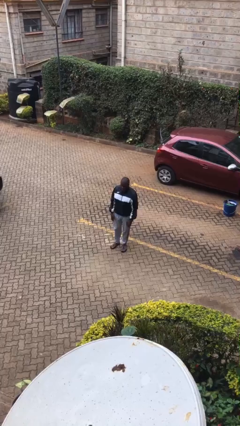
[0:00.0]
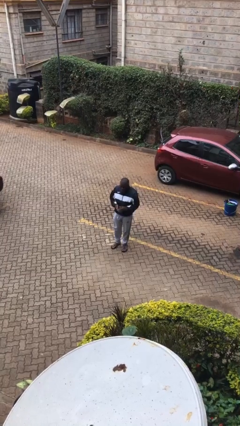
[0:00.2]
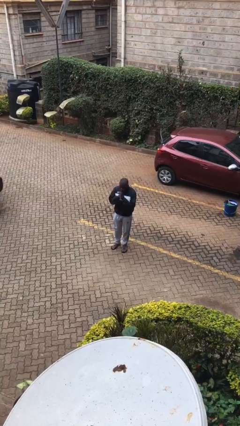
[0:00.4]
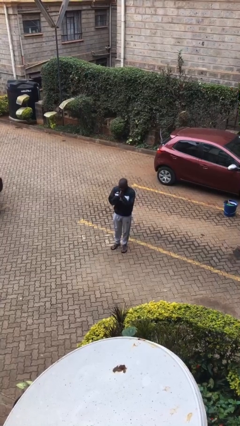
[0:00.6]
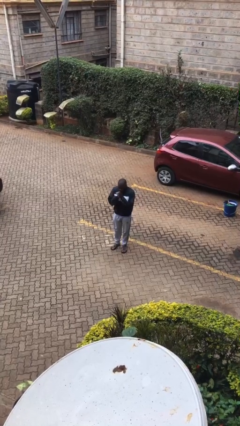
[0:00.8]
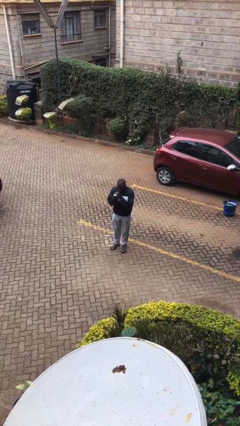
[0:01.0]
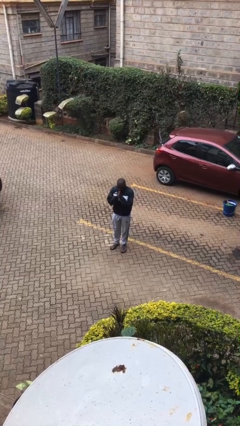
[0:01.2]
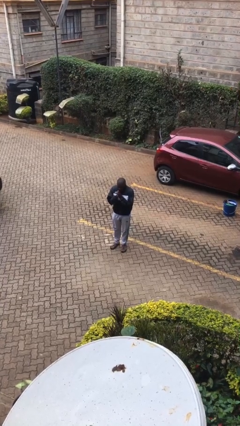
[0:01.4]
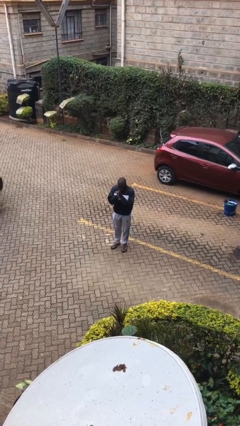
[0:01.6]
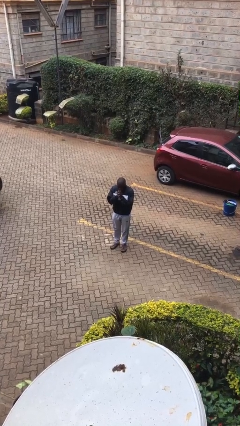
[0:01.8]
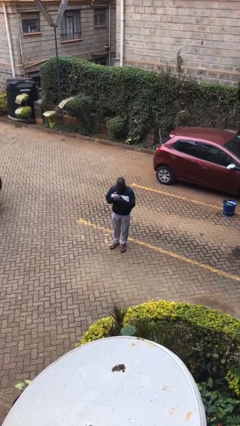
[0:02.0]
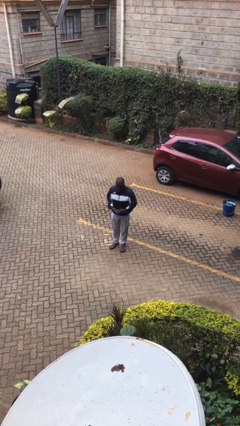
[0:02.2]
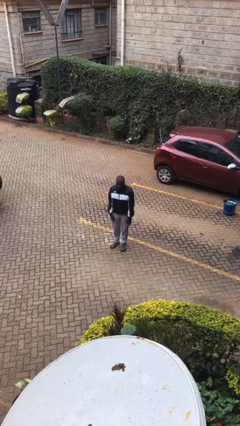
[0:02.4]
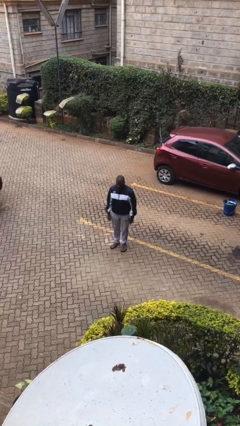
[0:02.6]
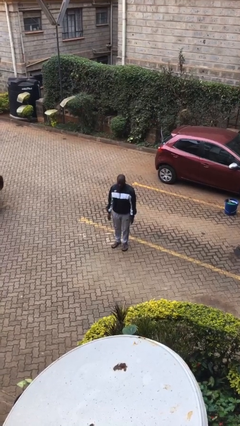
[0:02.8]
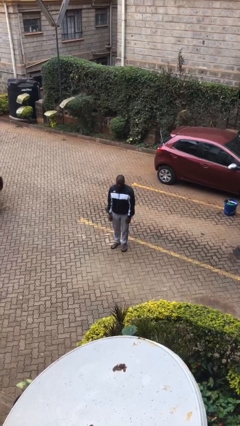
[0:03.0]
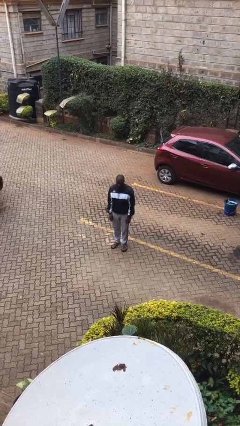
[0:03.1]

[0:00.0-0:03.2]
person blows into hands

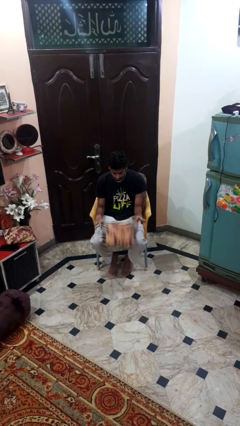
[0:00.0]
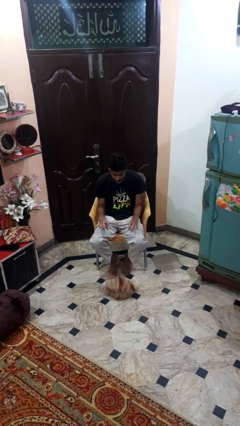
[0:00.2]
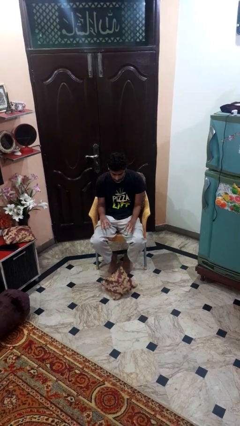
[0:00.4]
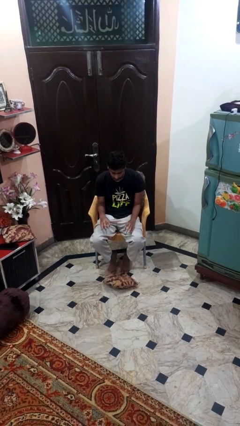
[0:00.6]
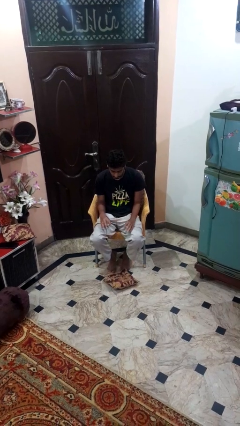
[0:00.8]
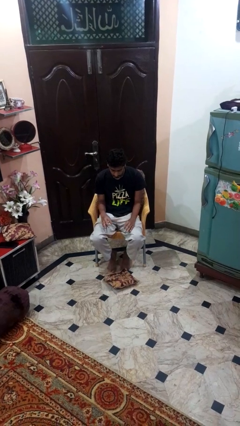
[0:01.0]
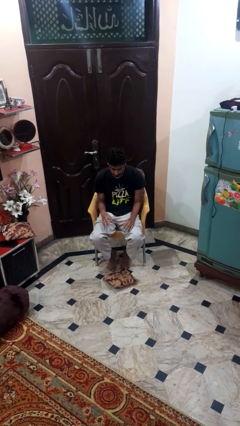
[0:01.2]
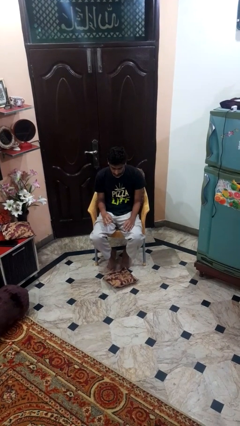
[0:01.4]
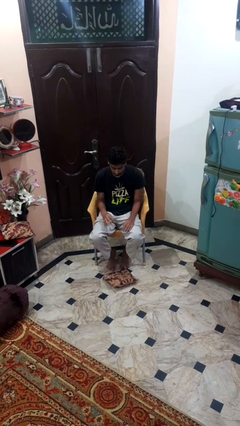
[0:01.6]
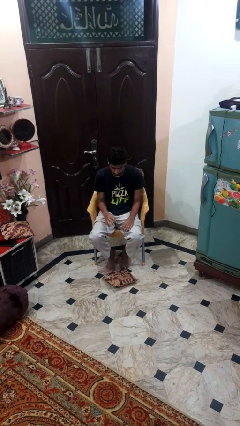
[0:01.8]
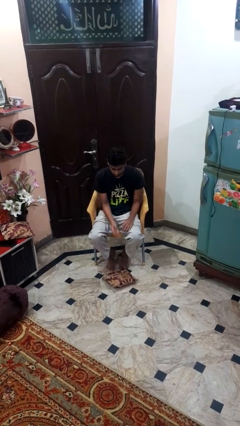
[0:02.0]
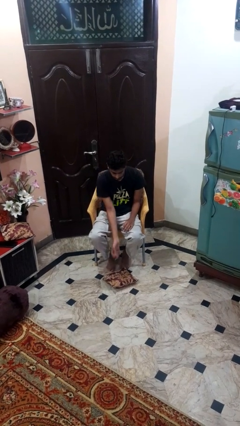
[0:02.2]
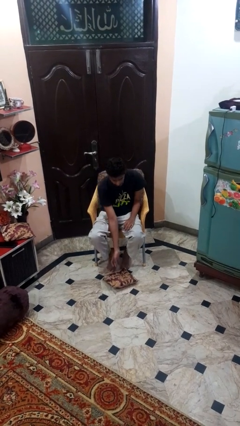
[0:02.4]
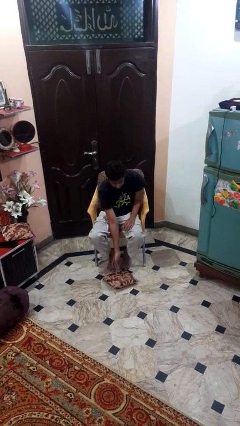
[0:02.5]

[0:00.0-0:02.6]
person drops object

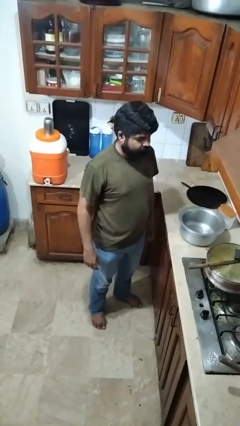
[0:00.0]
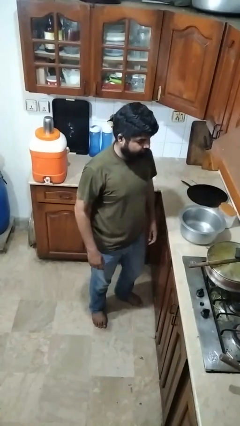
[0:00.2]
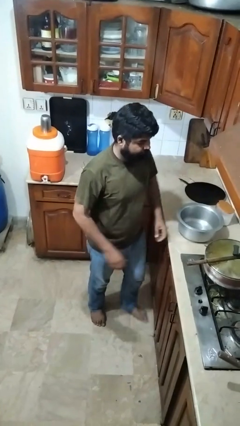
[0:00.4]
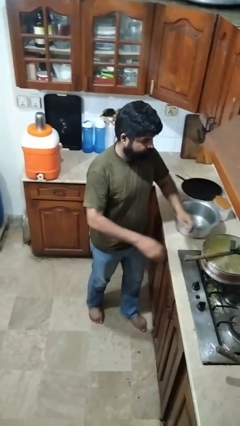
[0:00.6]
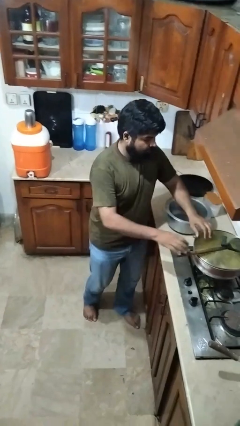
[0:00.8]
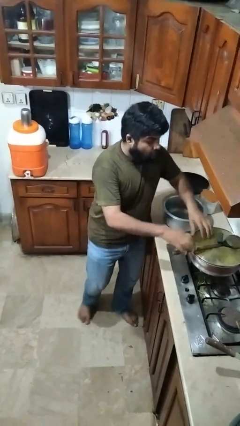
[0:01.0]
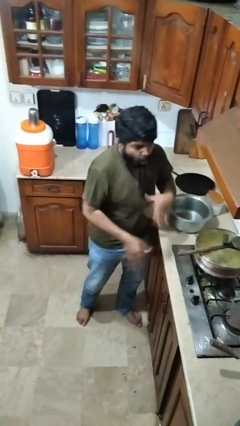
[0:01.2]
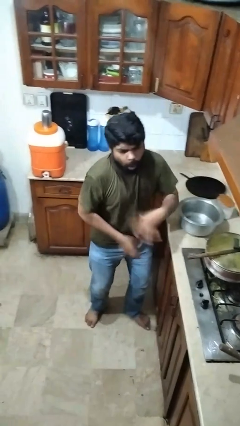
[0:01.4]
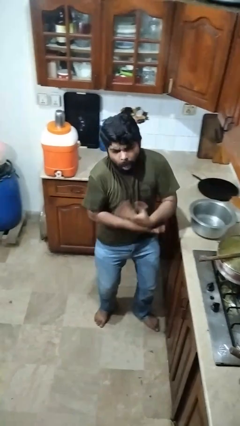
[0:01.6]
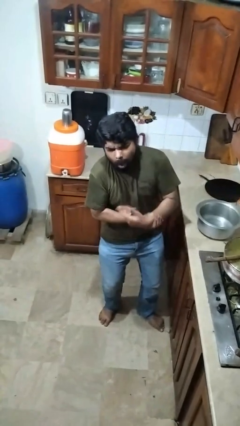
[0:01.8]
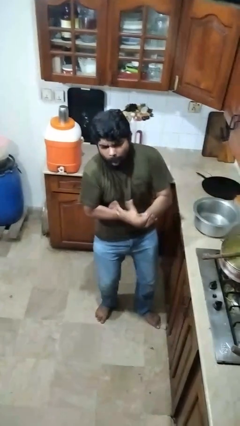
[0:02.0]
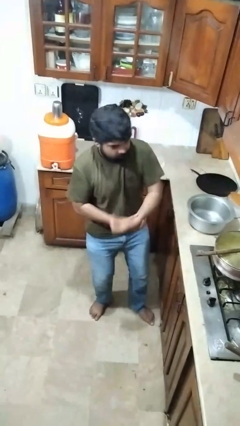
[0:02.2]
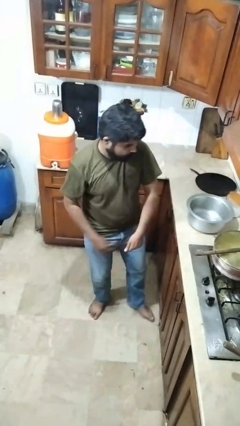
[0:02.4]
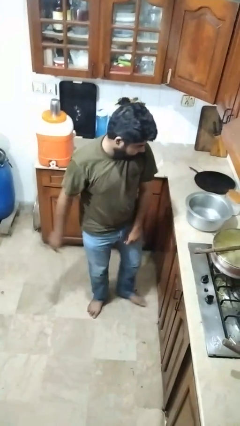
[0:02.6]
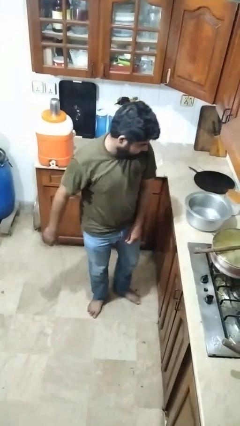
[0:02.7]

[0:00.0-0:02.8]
person burns hand

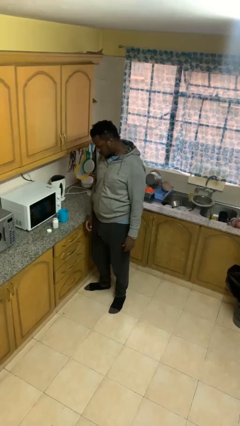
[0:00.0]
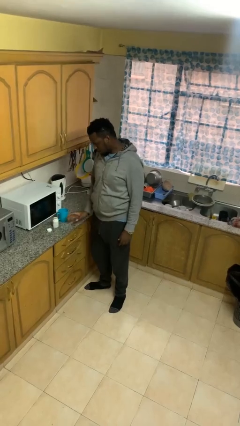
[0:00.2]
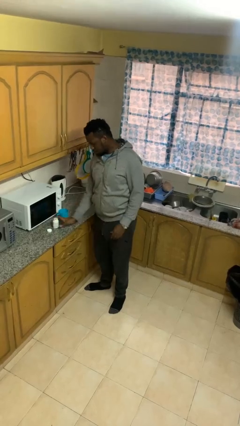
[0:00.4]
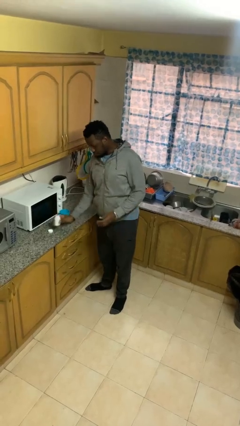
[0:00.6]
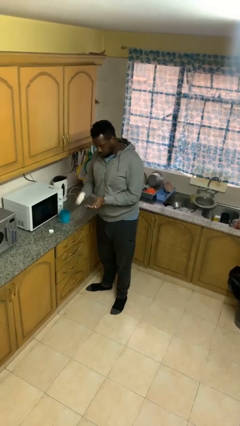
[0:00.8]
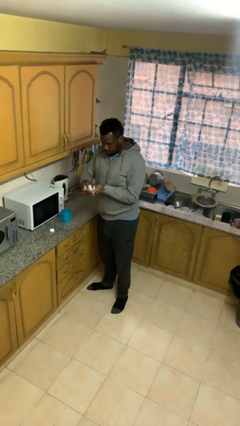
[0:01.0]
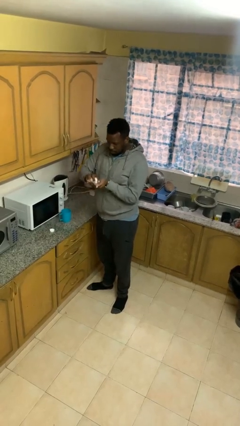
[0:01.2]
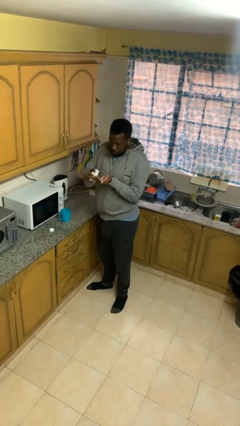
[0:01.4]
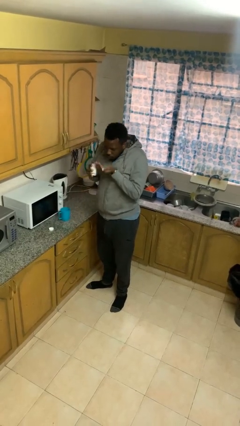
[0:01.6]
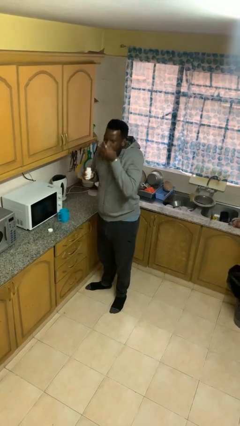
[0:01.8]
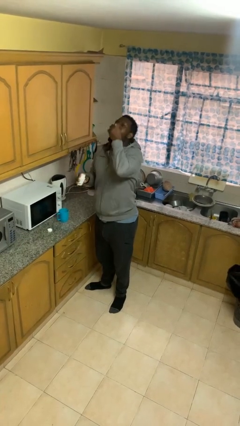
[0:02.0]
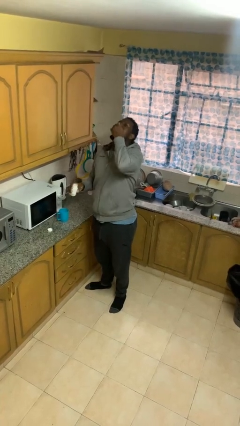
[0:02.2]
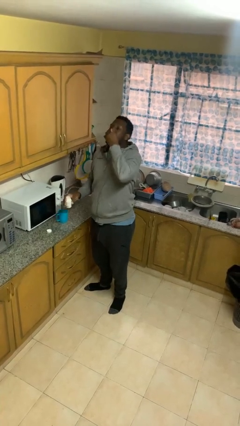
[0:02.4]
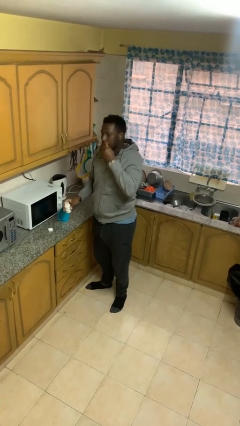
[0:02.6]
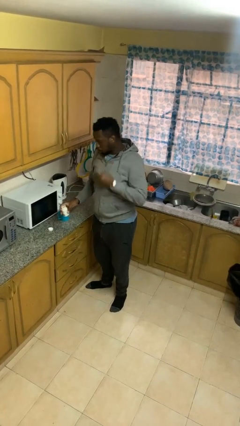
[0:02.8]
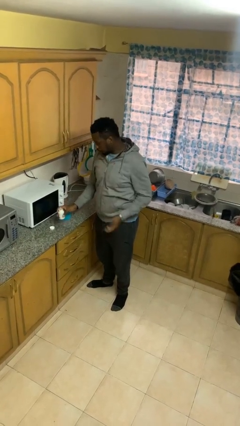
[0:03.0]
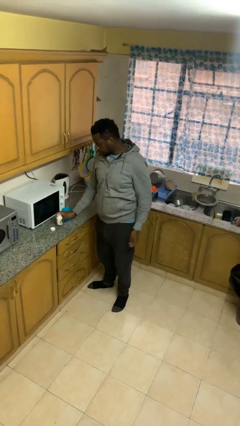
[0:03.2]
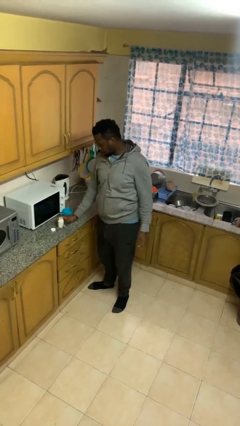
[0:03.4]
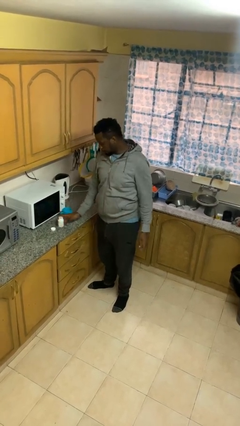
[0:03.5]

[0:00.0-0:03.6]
person takes medicine pills

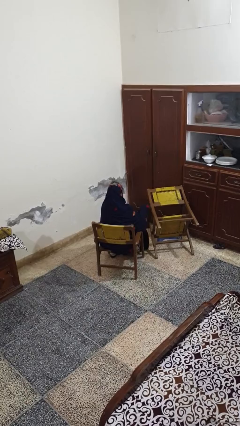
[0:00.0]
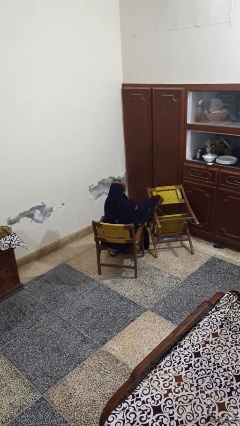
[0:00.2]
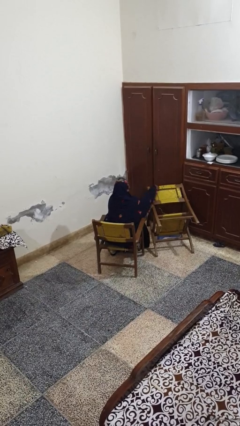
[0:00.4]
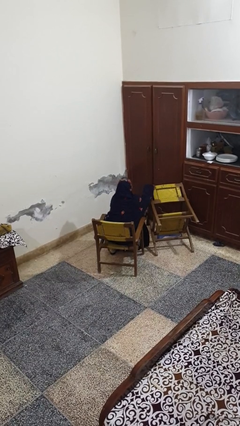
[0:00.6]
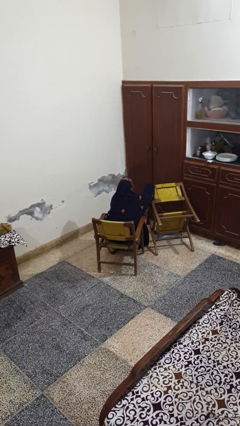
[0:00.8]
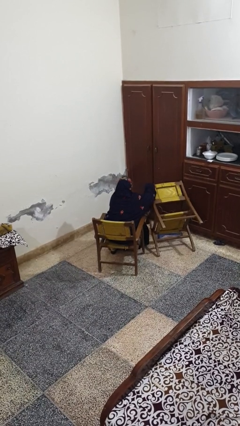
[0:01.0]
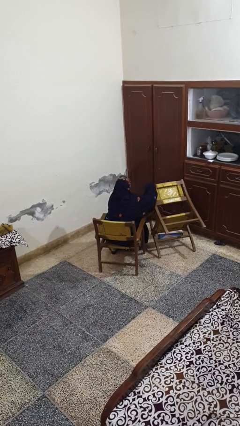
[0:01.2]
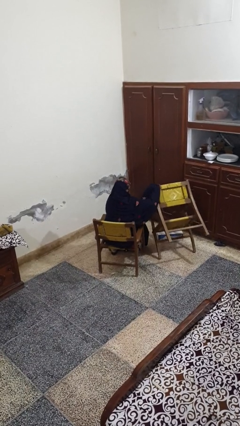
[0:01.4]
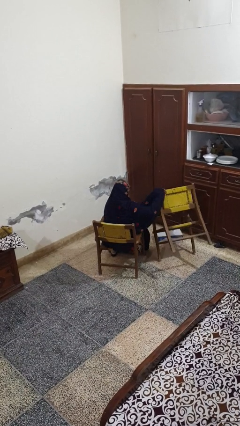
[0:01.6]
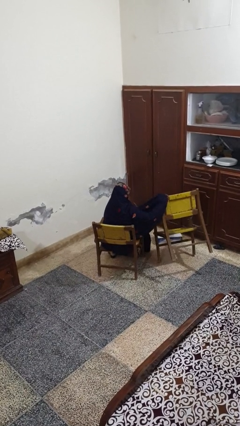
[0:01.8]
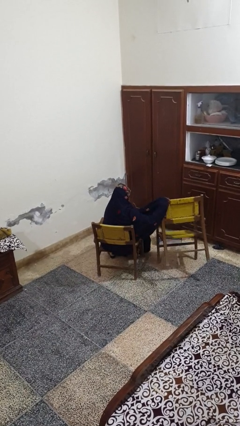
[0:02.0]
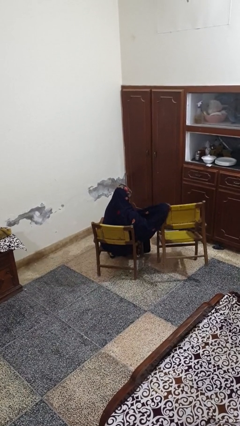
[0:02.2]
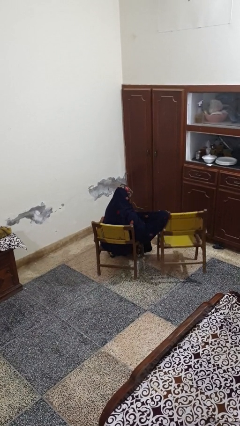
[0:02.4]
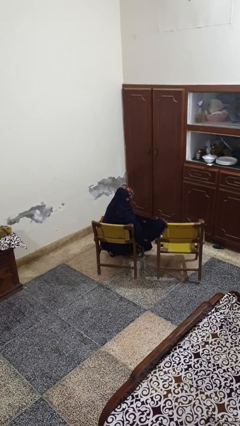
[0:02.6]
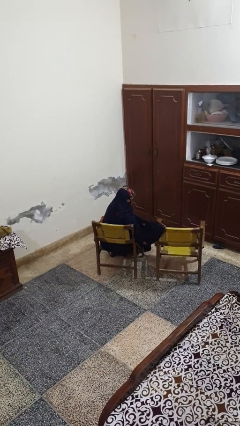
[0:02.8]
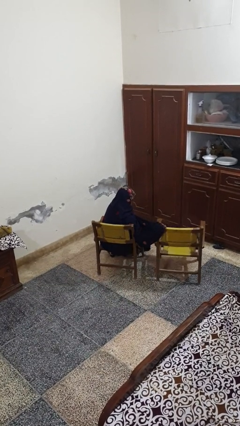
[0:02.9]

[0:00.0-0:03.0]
person sets upright furniture

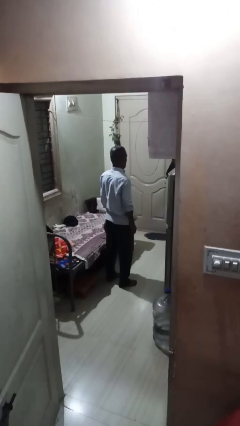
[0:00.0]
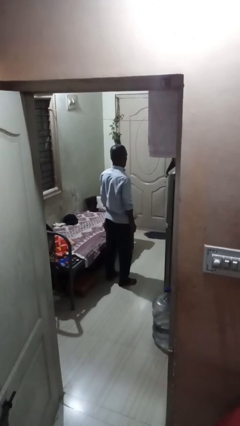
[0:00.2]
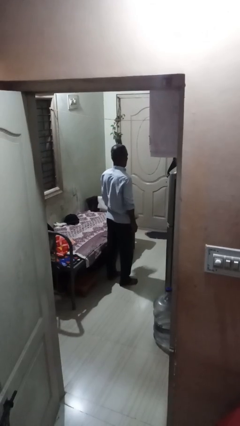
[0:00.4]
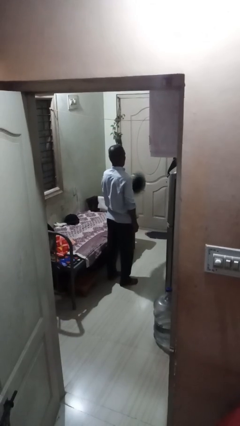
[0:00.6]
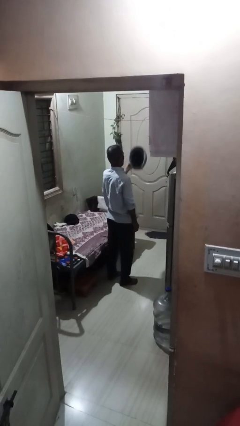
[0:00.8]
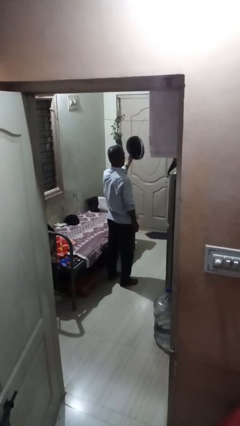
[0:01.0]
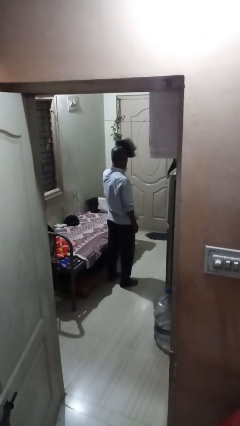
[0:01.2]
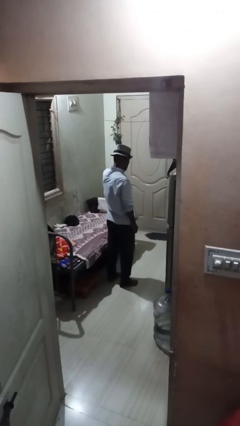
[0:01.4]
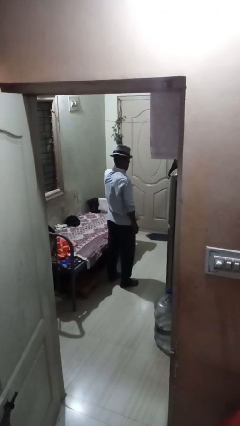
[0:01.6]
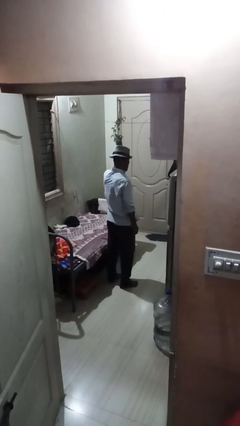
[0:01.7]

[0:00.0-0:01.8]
person puts on hat

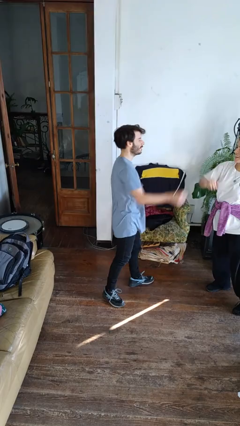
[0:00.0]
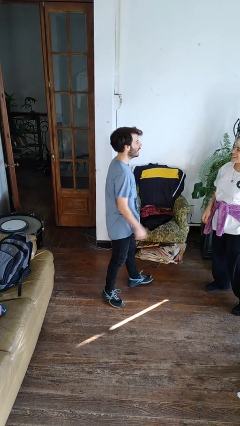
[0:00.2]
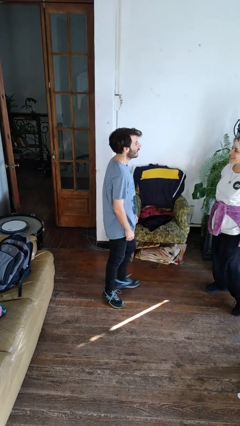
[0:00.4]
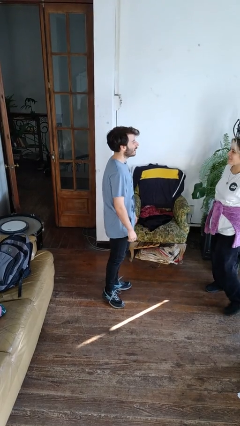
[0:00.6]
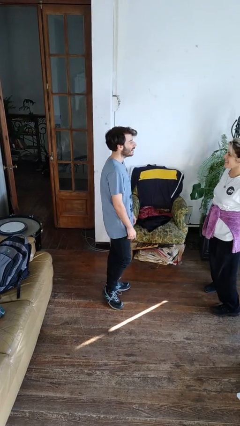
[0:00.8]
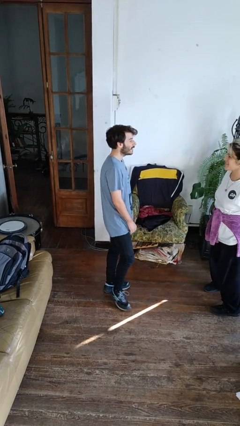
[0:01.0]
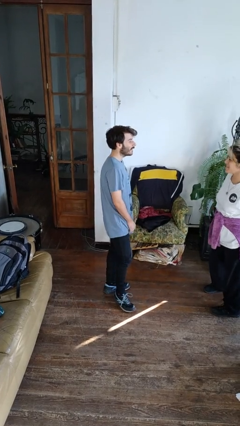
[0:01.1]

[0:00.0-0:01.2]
person highfives hand
